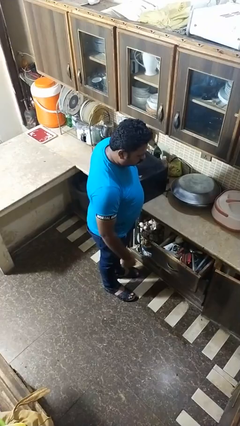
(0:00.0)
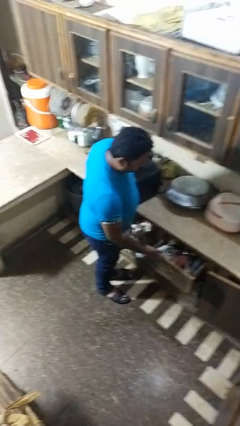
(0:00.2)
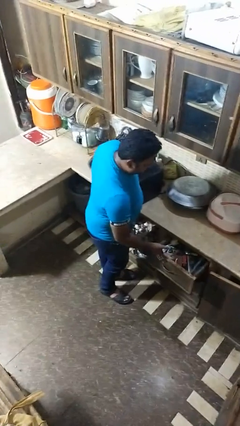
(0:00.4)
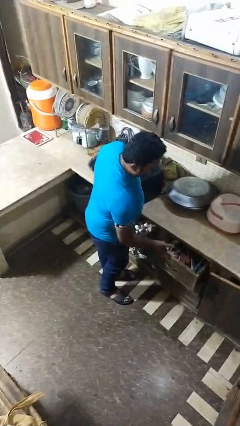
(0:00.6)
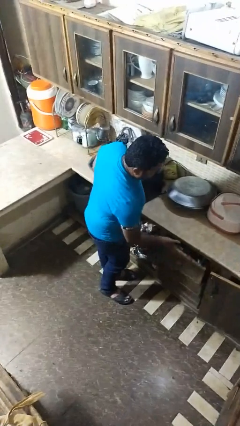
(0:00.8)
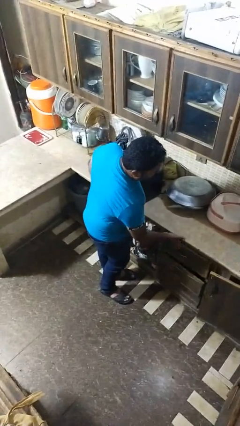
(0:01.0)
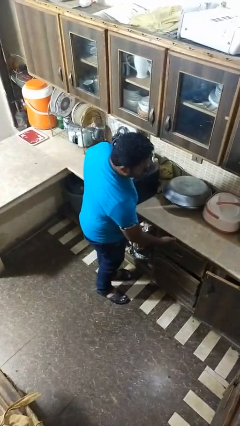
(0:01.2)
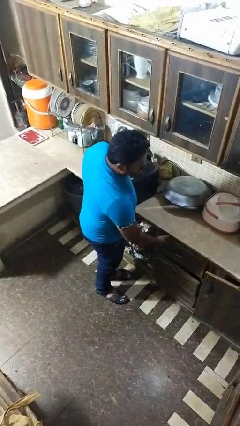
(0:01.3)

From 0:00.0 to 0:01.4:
person closes dresser drawer

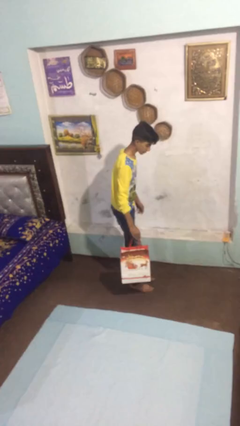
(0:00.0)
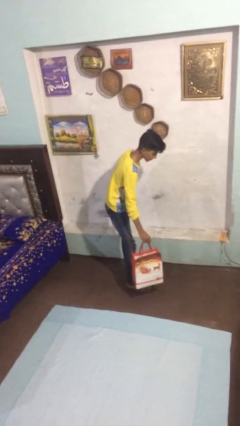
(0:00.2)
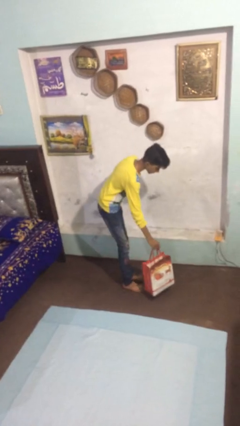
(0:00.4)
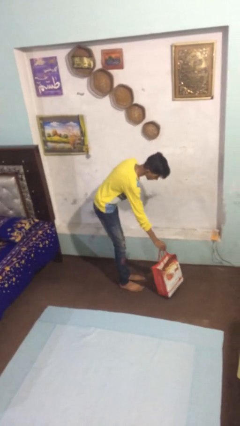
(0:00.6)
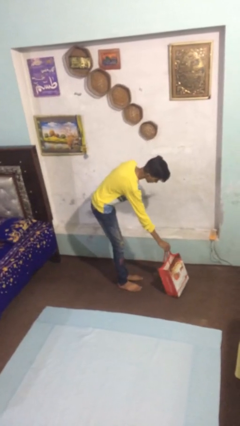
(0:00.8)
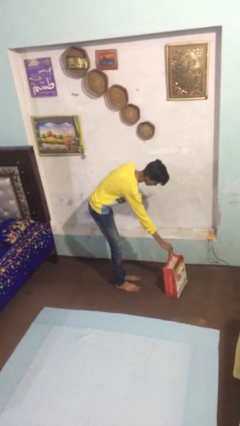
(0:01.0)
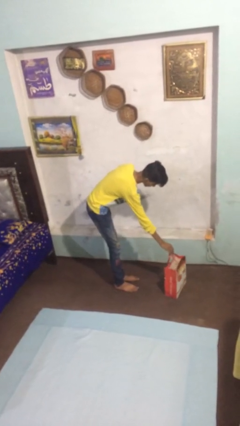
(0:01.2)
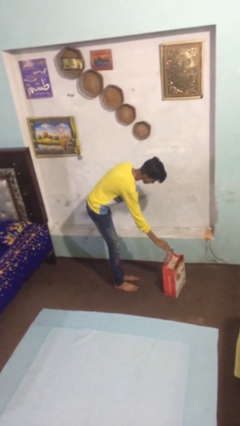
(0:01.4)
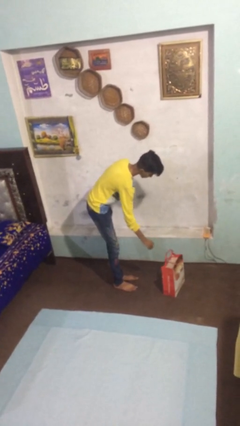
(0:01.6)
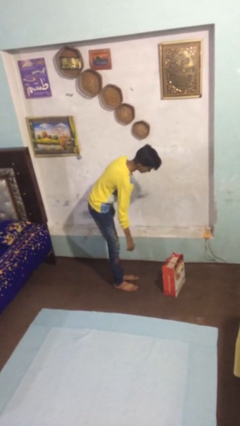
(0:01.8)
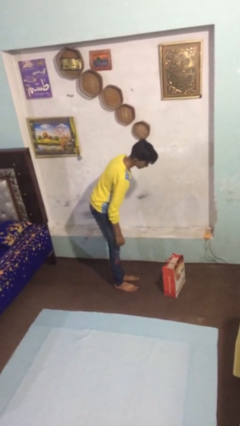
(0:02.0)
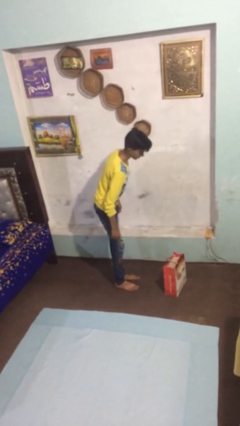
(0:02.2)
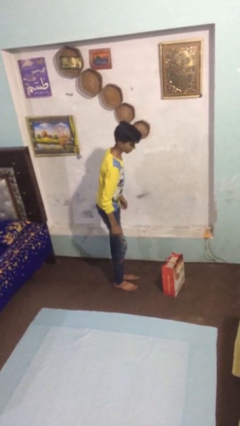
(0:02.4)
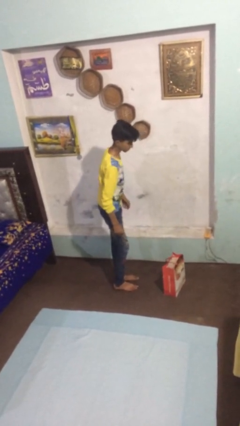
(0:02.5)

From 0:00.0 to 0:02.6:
person puts down object on floor

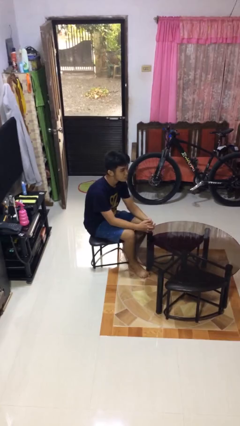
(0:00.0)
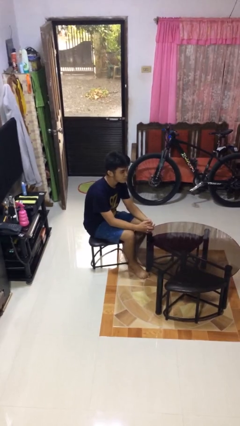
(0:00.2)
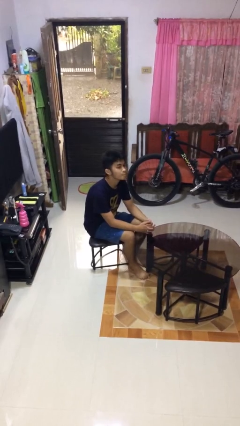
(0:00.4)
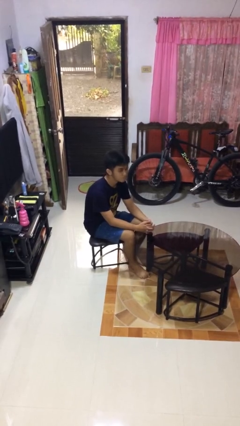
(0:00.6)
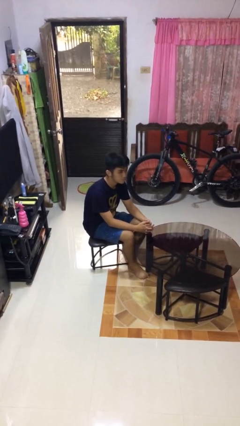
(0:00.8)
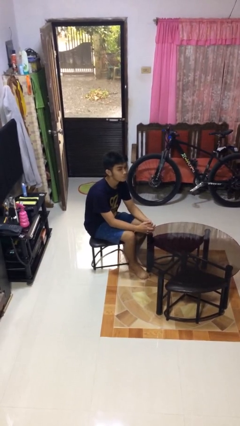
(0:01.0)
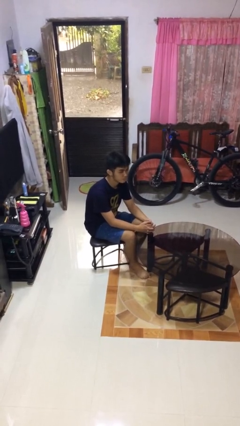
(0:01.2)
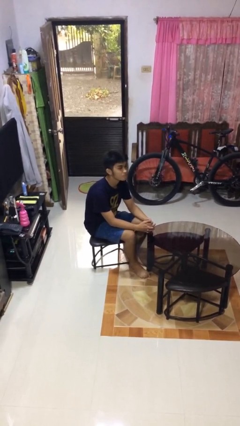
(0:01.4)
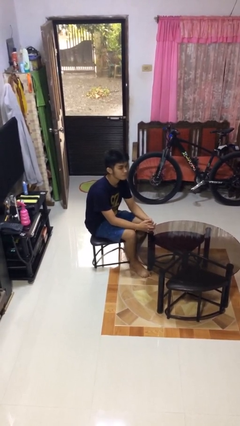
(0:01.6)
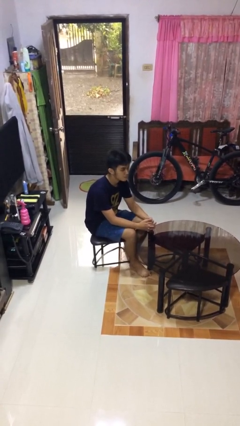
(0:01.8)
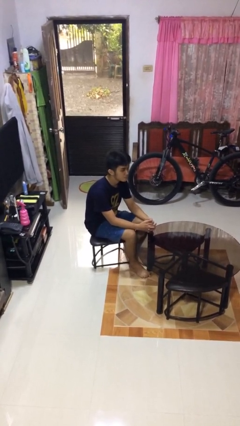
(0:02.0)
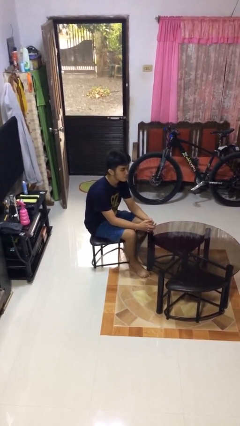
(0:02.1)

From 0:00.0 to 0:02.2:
person nods head

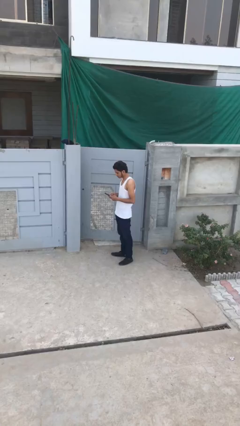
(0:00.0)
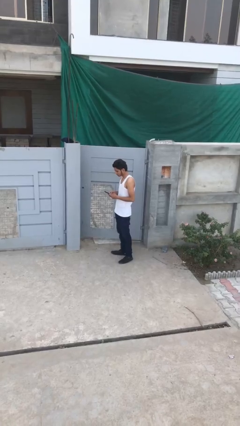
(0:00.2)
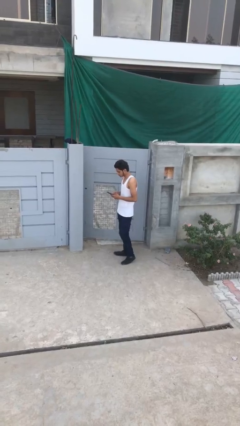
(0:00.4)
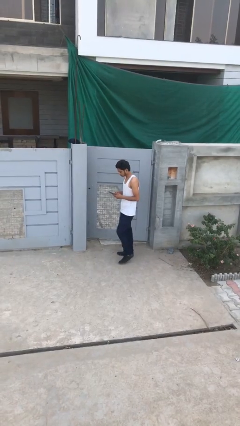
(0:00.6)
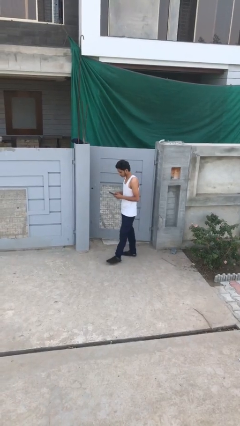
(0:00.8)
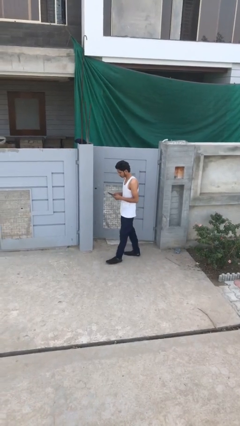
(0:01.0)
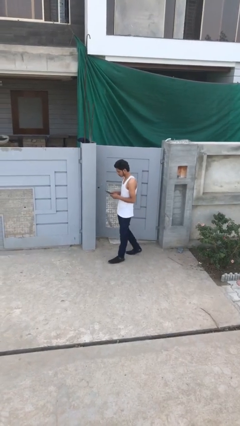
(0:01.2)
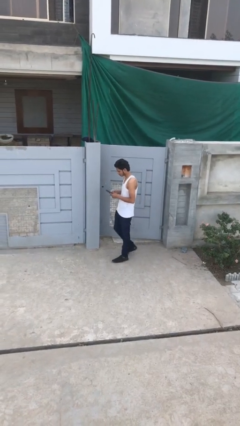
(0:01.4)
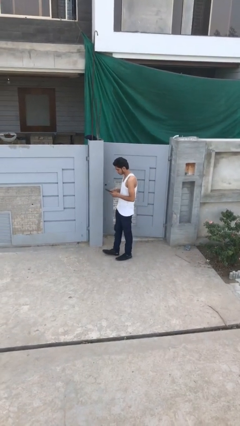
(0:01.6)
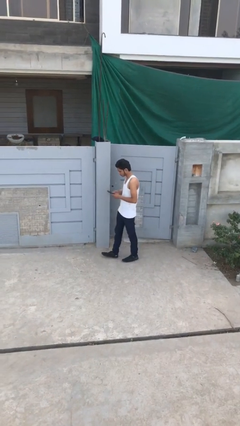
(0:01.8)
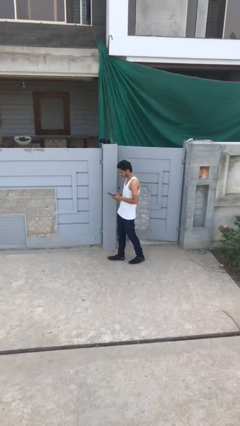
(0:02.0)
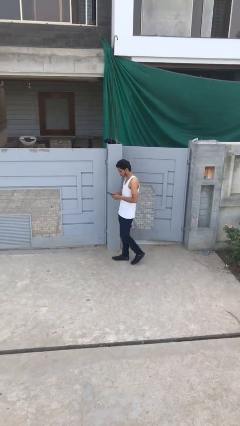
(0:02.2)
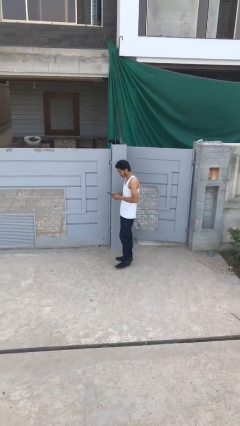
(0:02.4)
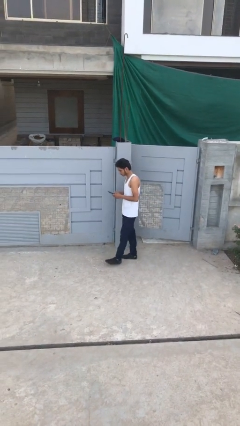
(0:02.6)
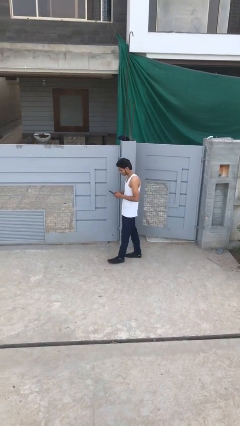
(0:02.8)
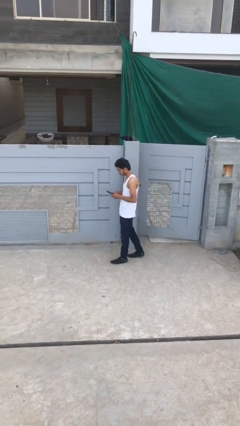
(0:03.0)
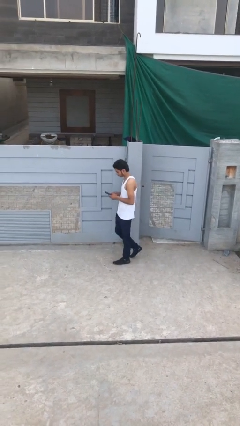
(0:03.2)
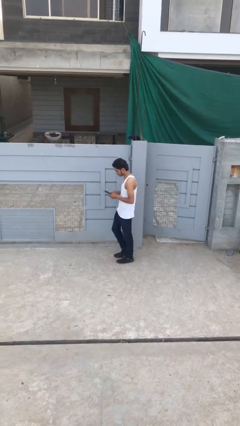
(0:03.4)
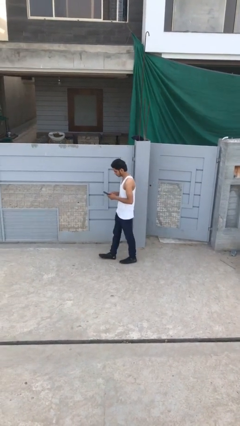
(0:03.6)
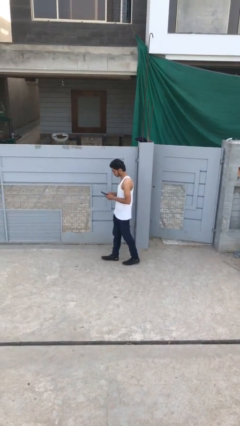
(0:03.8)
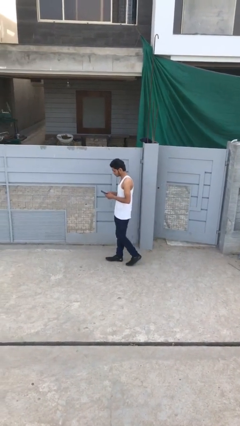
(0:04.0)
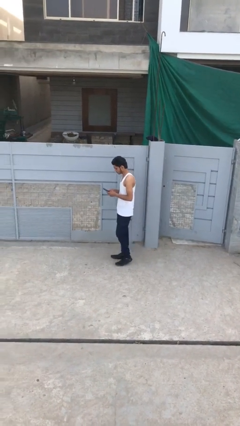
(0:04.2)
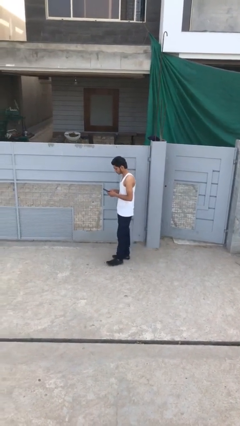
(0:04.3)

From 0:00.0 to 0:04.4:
person texts on phone

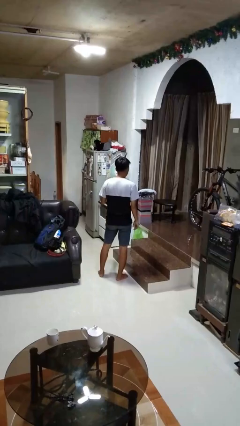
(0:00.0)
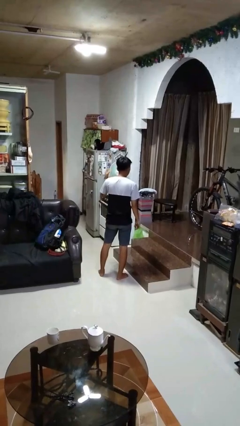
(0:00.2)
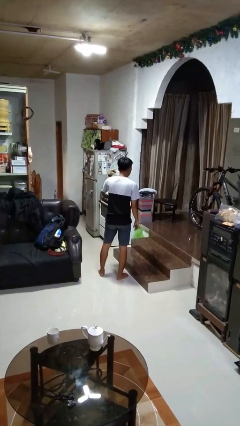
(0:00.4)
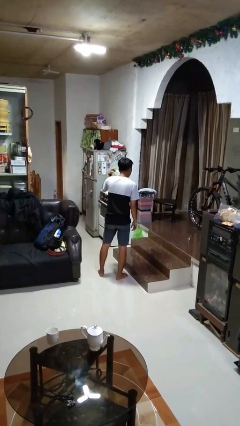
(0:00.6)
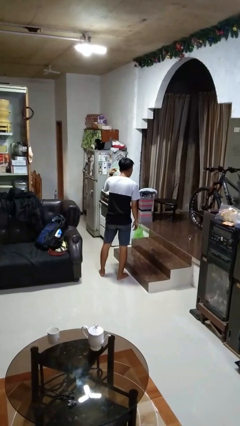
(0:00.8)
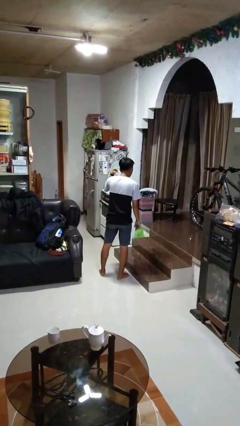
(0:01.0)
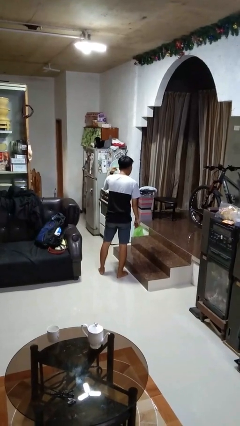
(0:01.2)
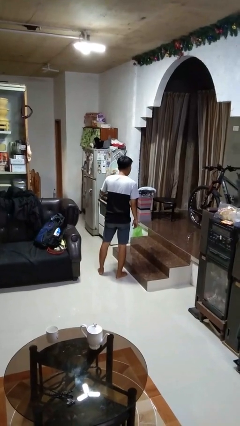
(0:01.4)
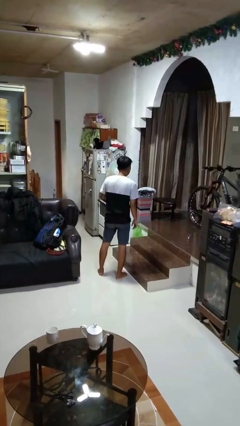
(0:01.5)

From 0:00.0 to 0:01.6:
person gestures listen closely

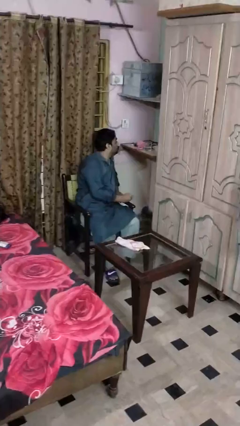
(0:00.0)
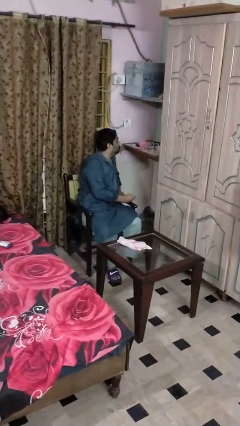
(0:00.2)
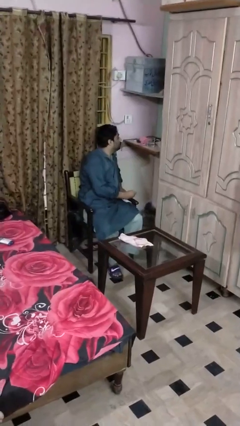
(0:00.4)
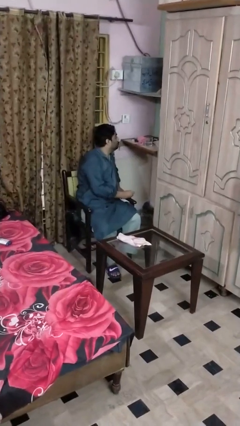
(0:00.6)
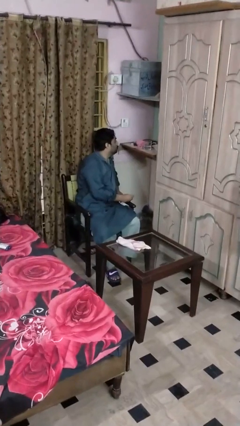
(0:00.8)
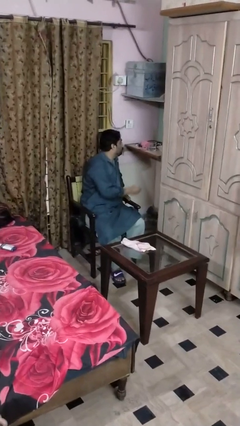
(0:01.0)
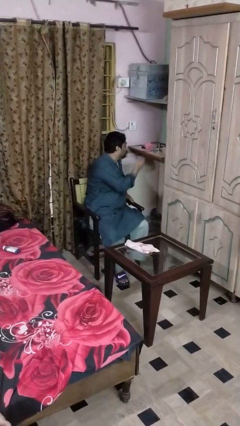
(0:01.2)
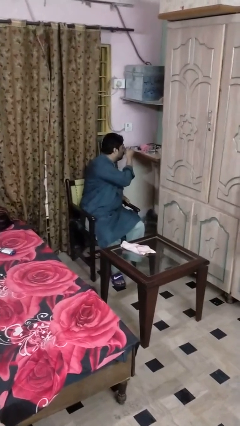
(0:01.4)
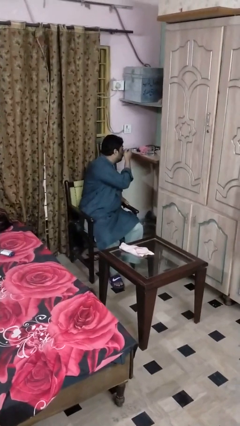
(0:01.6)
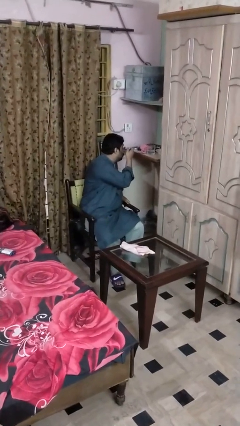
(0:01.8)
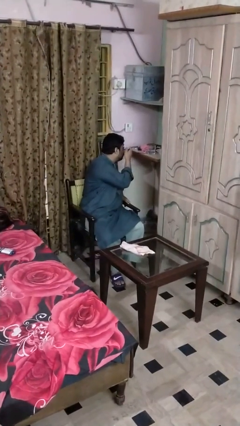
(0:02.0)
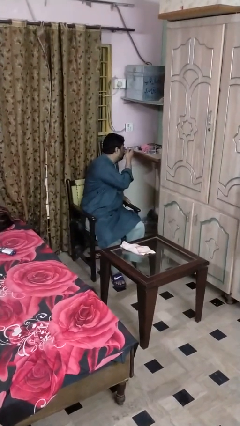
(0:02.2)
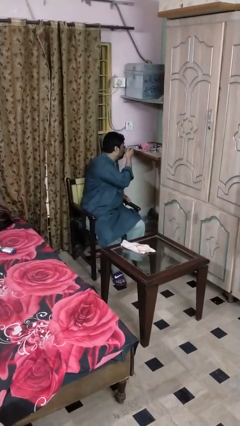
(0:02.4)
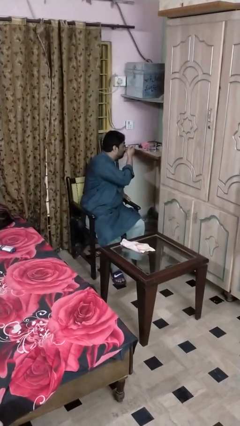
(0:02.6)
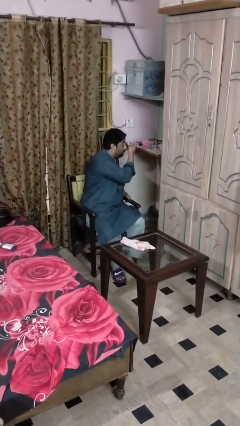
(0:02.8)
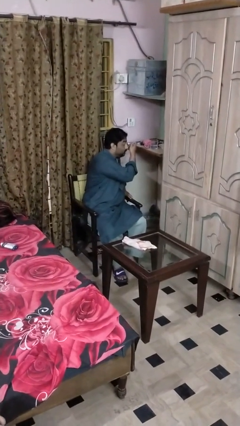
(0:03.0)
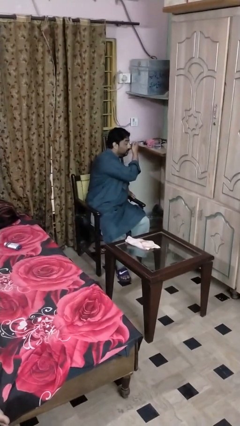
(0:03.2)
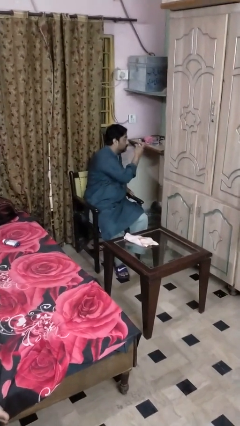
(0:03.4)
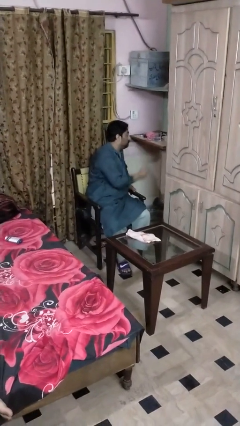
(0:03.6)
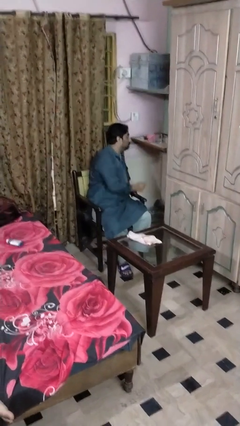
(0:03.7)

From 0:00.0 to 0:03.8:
person applies eye makeup

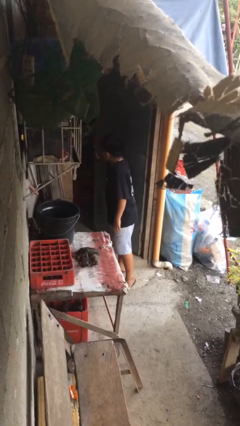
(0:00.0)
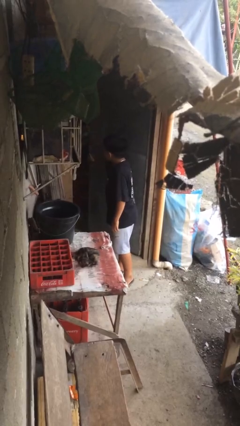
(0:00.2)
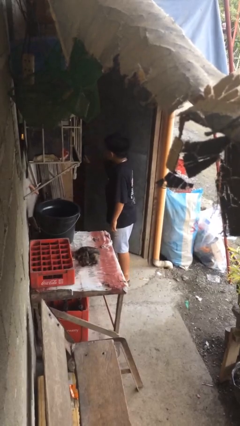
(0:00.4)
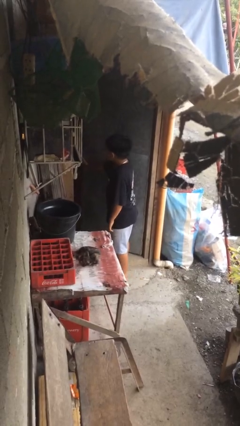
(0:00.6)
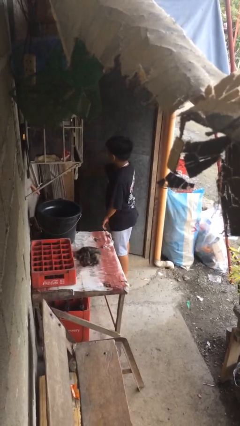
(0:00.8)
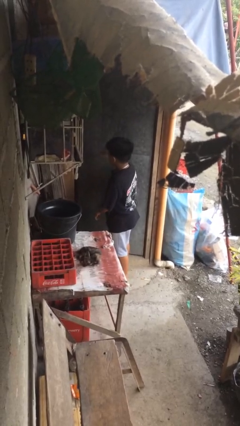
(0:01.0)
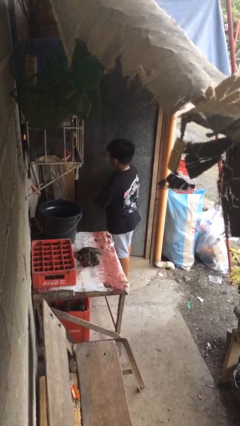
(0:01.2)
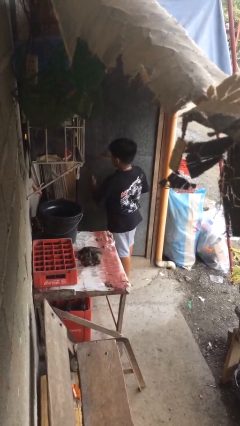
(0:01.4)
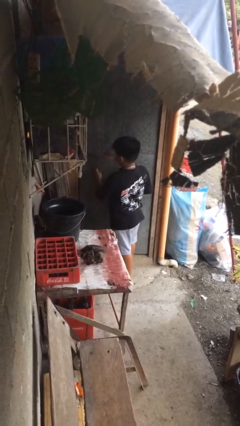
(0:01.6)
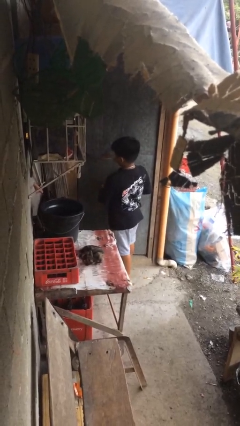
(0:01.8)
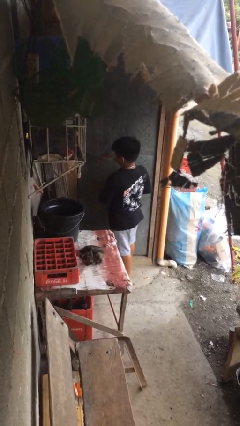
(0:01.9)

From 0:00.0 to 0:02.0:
person closes facility door
